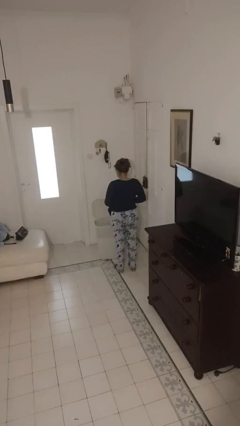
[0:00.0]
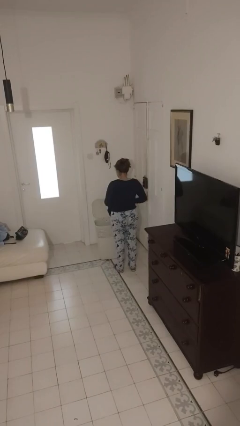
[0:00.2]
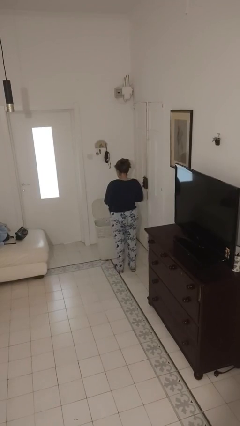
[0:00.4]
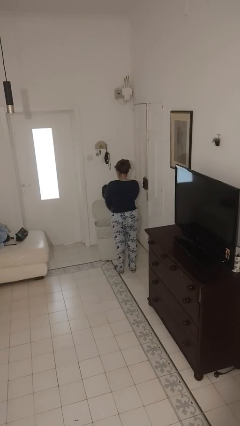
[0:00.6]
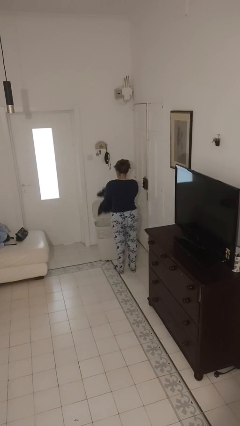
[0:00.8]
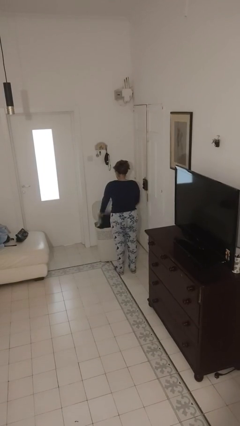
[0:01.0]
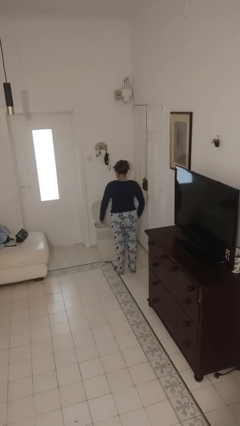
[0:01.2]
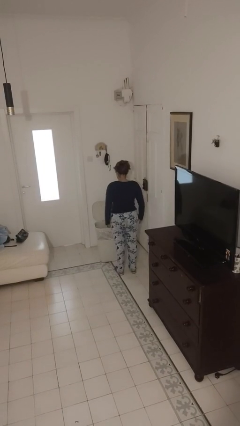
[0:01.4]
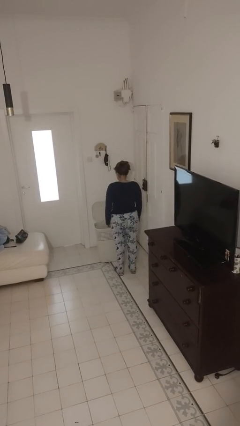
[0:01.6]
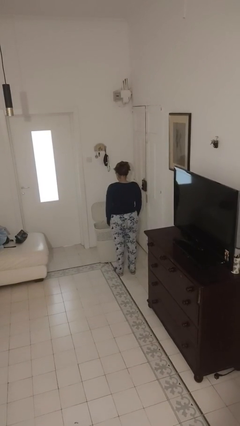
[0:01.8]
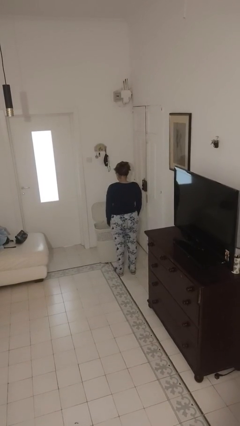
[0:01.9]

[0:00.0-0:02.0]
person puts object into basket

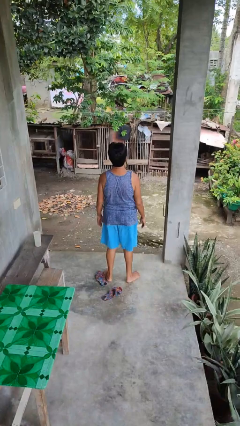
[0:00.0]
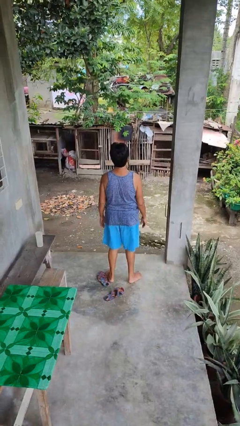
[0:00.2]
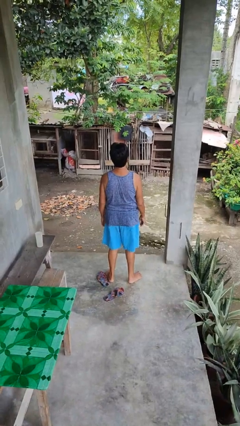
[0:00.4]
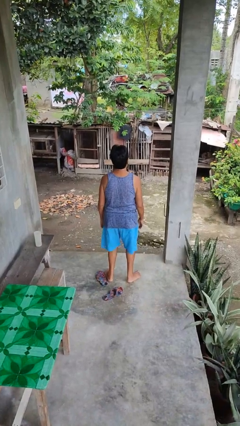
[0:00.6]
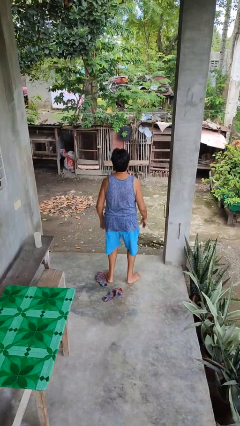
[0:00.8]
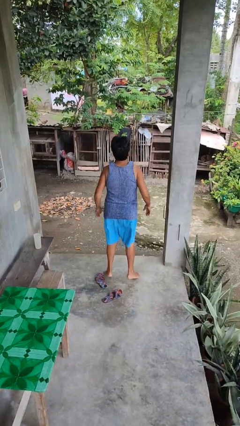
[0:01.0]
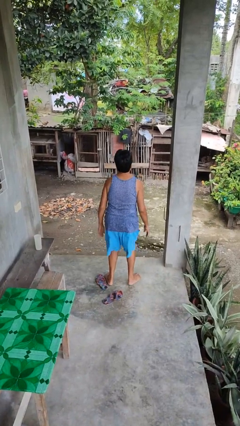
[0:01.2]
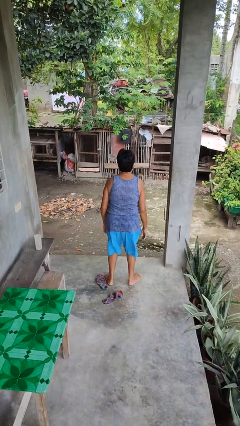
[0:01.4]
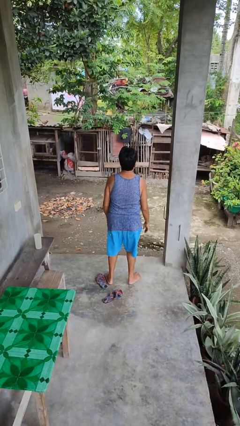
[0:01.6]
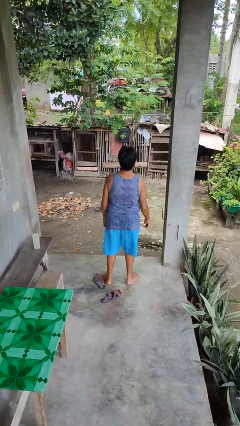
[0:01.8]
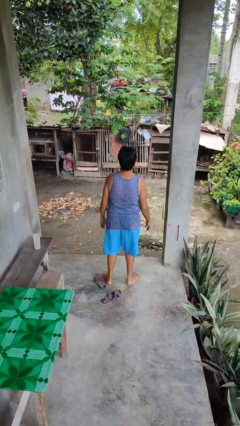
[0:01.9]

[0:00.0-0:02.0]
person jumps

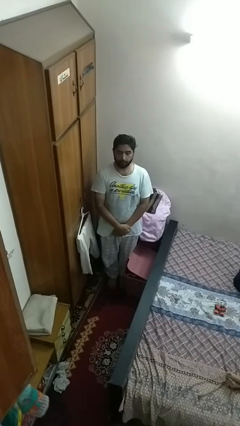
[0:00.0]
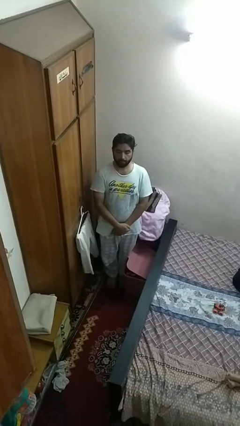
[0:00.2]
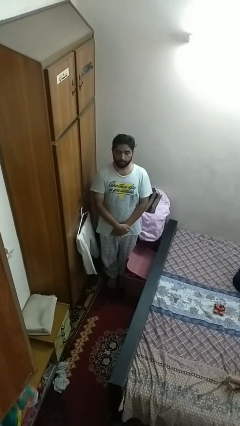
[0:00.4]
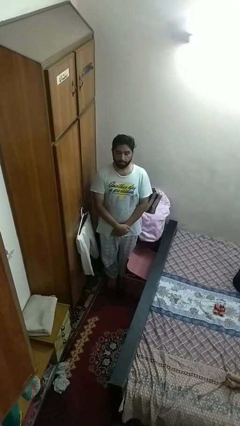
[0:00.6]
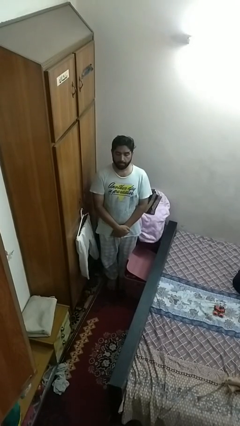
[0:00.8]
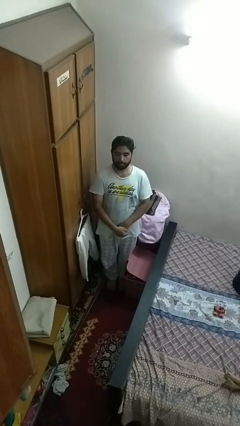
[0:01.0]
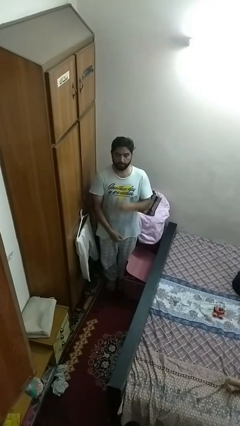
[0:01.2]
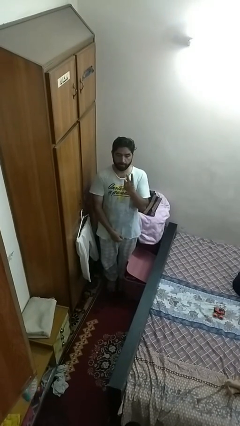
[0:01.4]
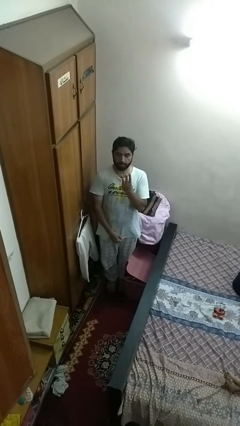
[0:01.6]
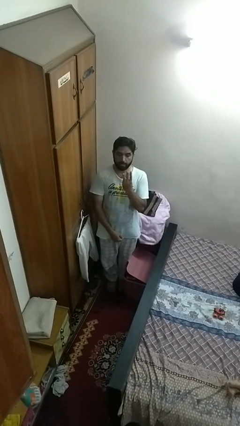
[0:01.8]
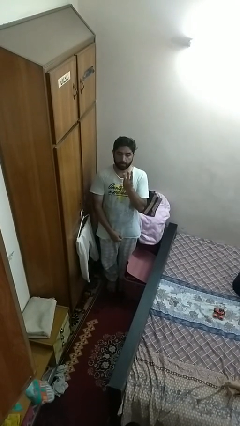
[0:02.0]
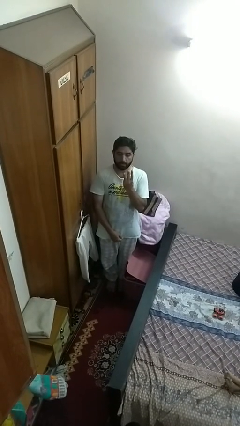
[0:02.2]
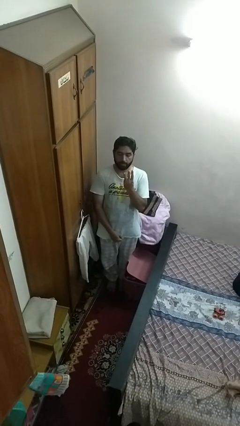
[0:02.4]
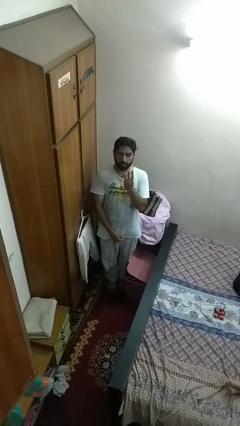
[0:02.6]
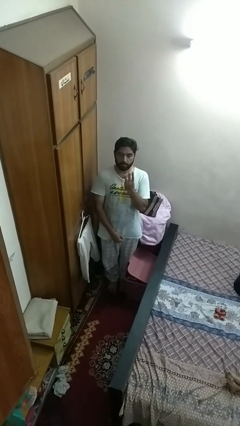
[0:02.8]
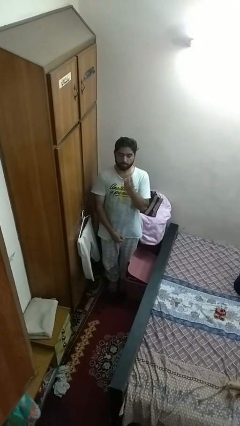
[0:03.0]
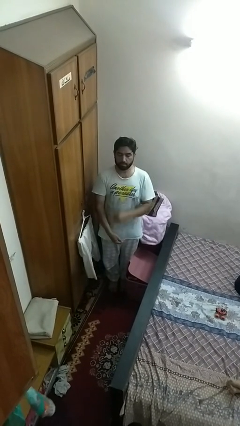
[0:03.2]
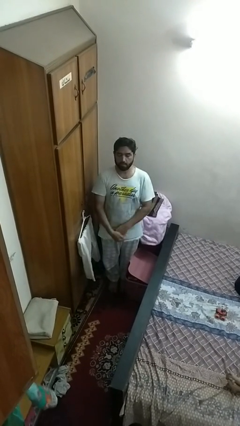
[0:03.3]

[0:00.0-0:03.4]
person gestures number three

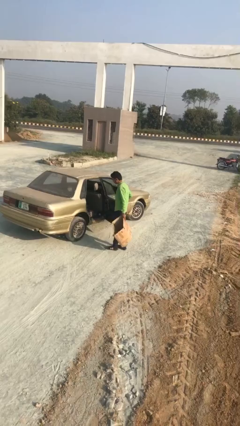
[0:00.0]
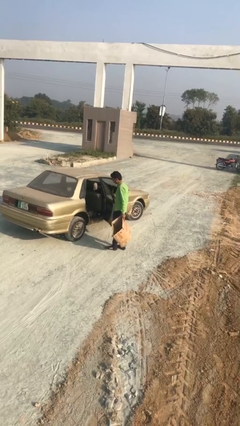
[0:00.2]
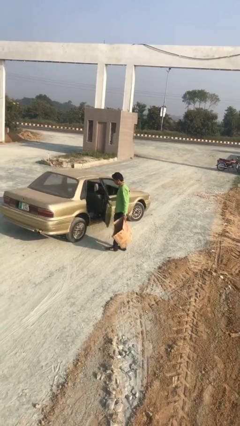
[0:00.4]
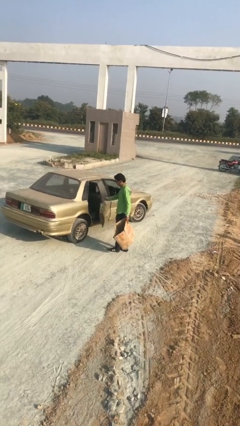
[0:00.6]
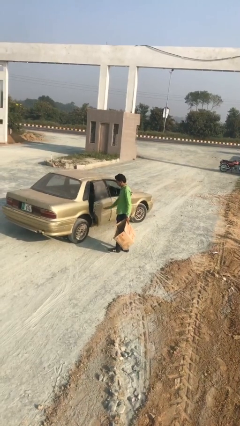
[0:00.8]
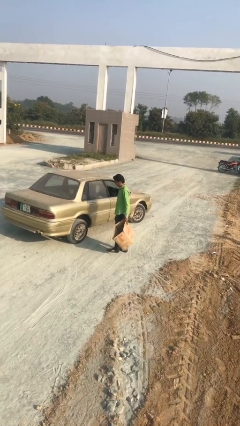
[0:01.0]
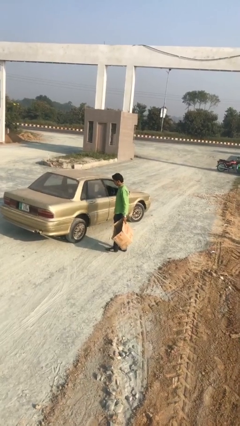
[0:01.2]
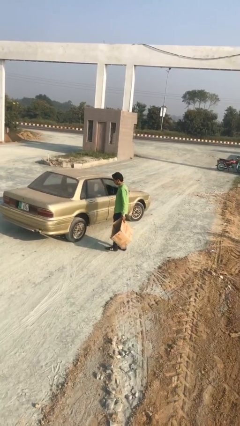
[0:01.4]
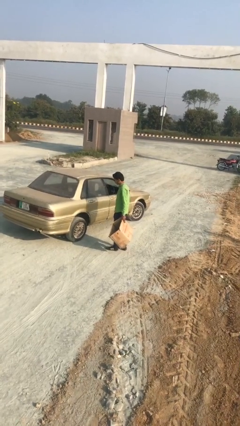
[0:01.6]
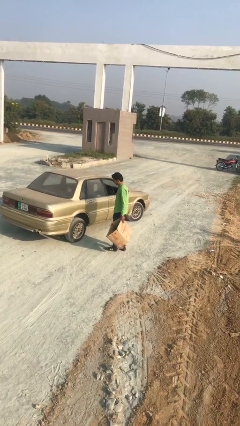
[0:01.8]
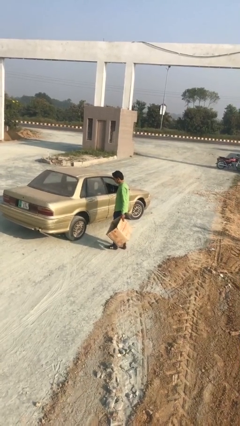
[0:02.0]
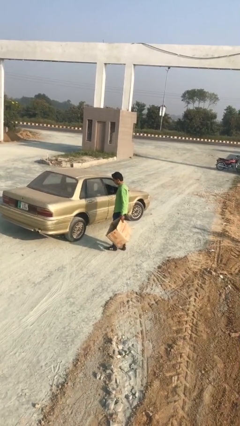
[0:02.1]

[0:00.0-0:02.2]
person closes car door

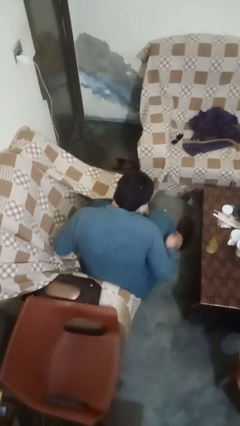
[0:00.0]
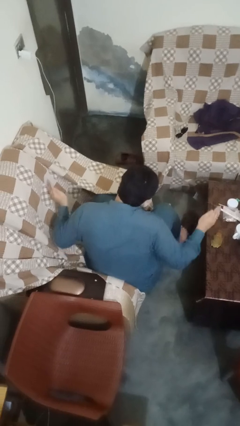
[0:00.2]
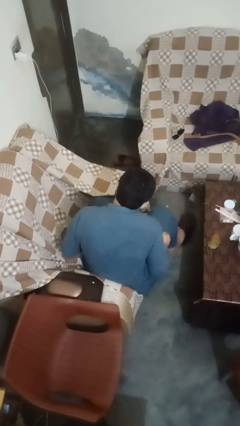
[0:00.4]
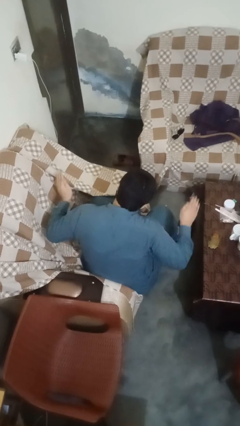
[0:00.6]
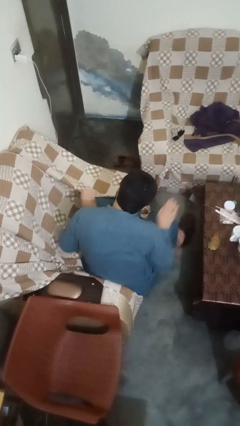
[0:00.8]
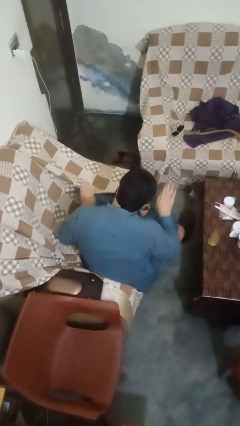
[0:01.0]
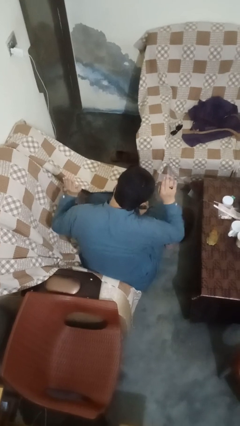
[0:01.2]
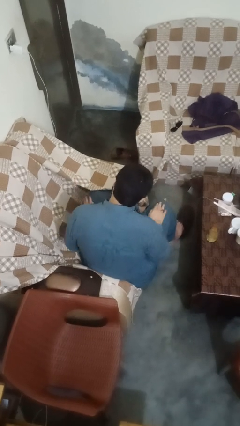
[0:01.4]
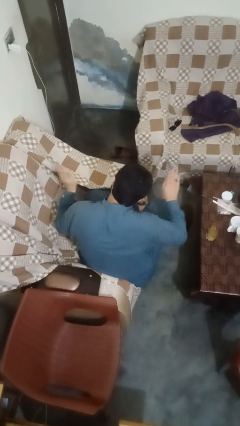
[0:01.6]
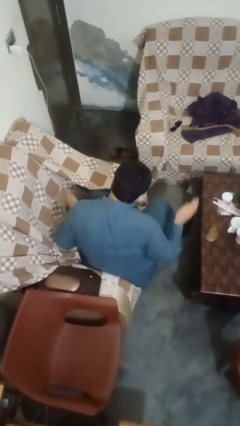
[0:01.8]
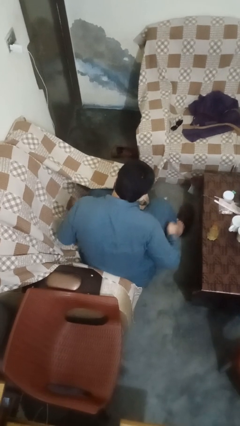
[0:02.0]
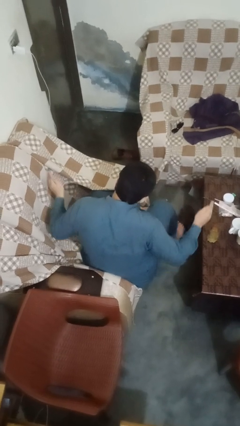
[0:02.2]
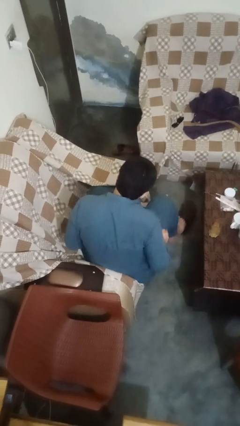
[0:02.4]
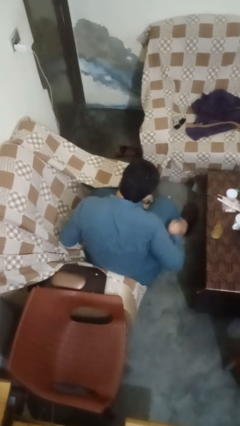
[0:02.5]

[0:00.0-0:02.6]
person slaps hands on thighs

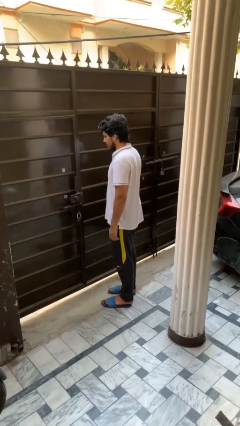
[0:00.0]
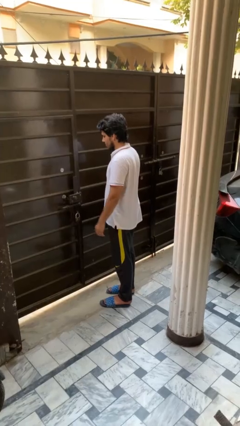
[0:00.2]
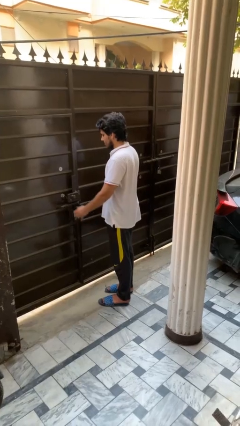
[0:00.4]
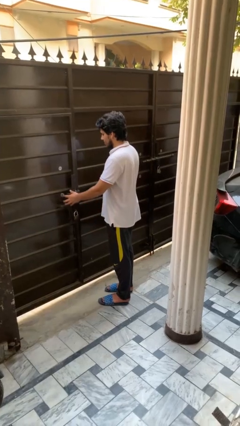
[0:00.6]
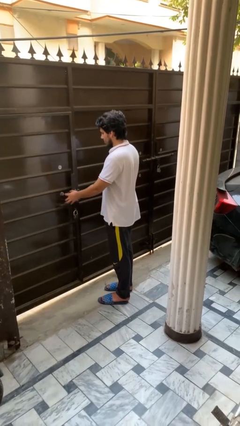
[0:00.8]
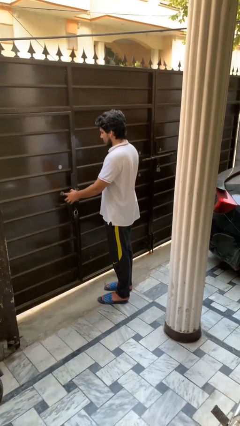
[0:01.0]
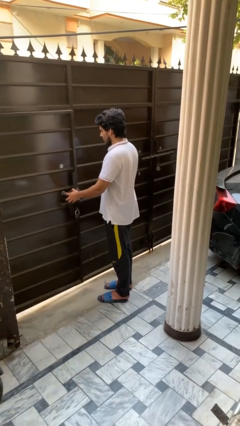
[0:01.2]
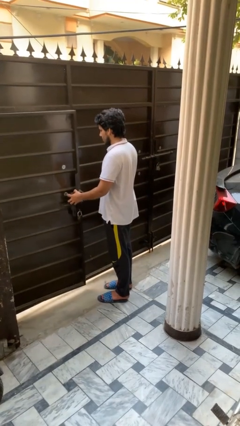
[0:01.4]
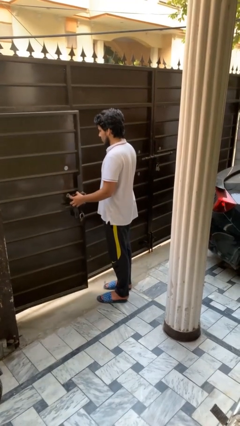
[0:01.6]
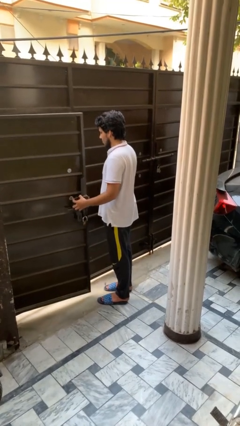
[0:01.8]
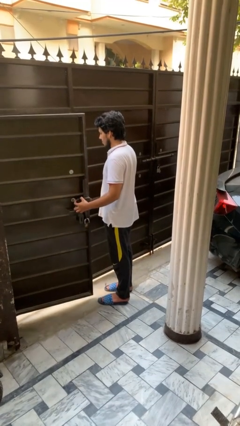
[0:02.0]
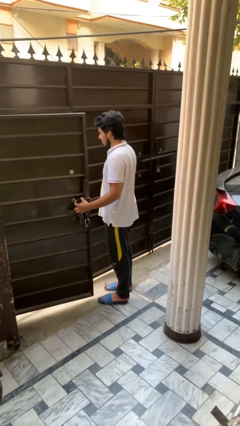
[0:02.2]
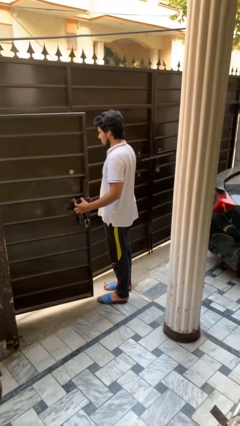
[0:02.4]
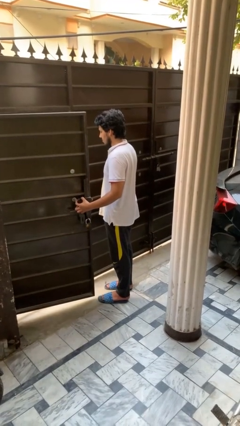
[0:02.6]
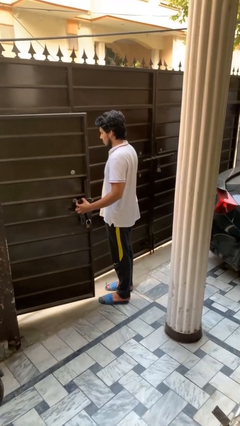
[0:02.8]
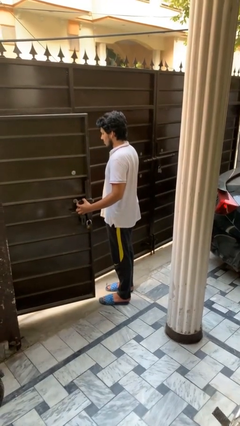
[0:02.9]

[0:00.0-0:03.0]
person opens gate

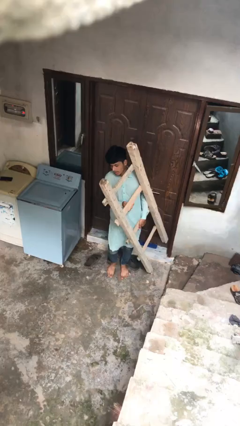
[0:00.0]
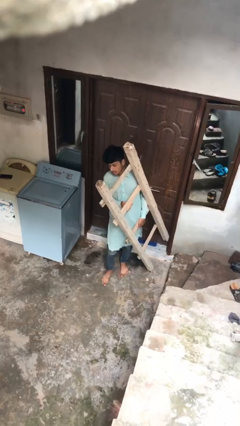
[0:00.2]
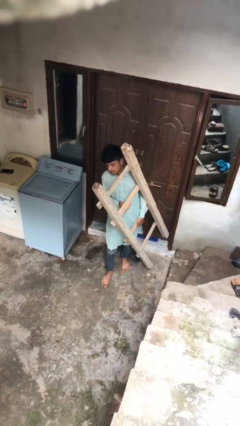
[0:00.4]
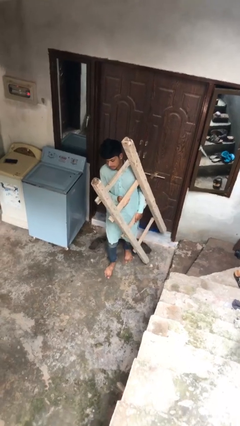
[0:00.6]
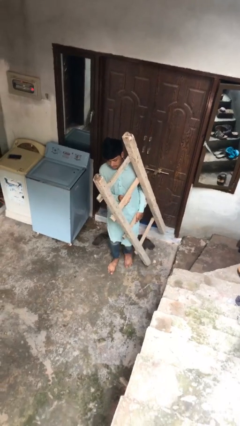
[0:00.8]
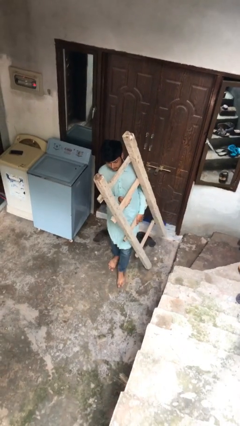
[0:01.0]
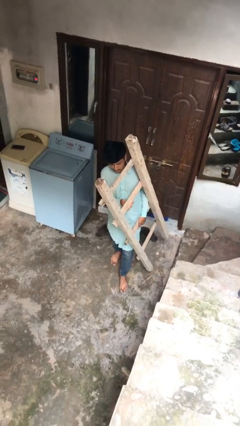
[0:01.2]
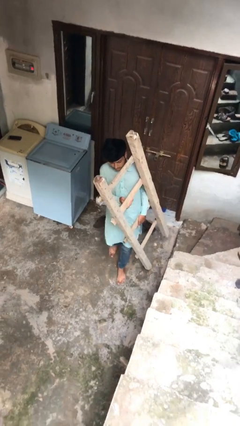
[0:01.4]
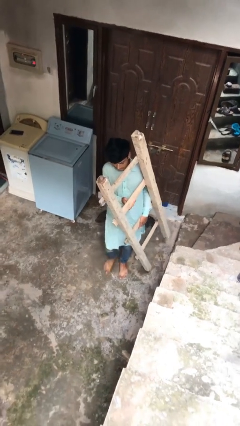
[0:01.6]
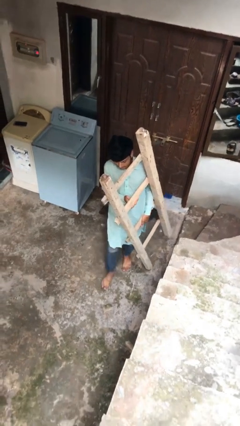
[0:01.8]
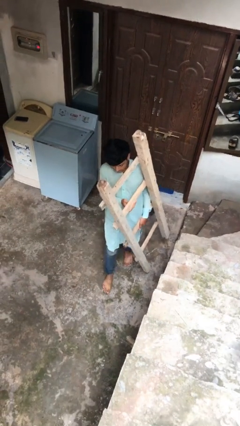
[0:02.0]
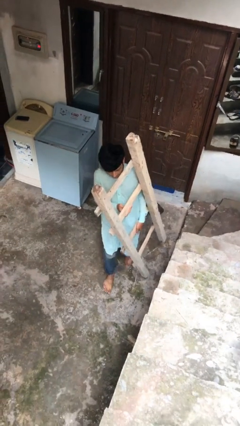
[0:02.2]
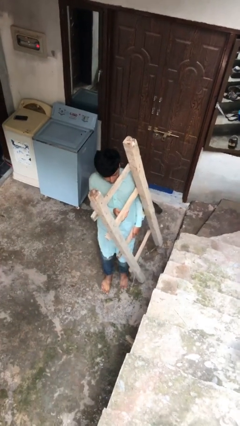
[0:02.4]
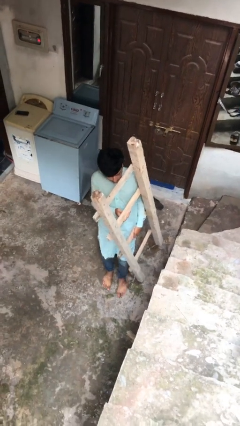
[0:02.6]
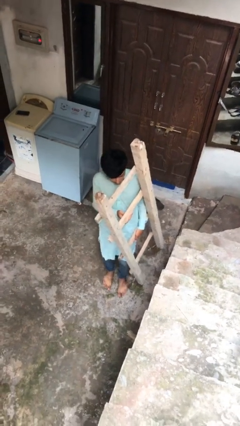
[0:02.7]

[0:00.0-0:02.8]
person carries heavy object
